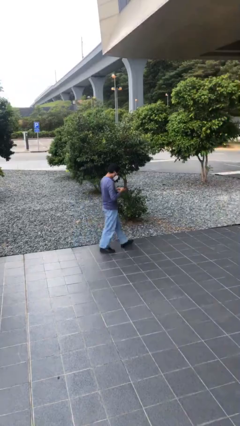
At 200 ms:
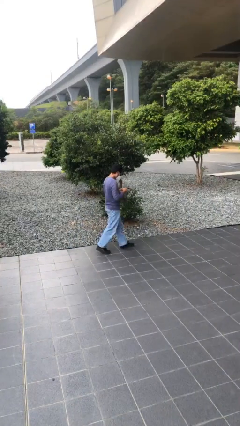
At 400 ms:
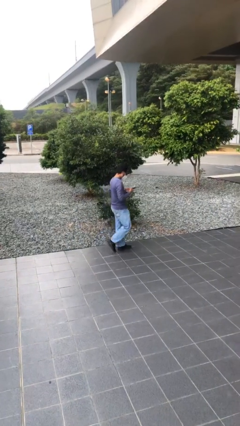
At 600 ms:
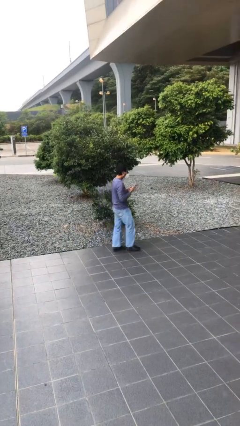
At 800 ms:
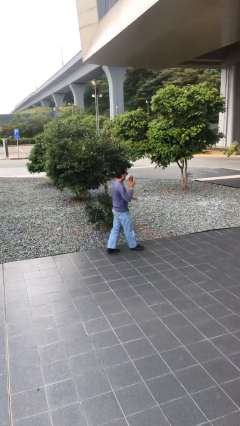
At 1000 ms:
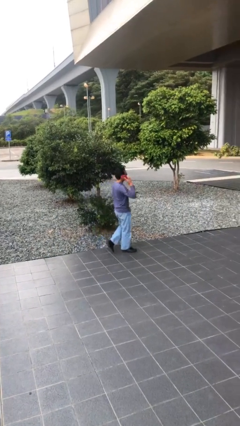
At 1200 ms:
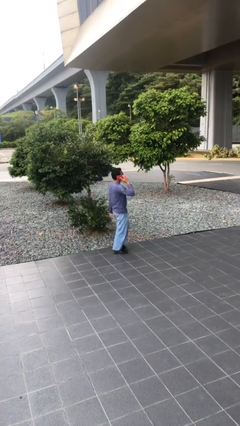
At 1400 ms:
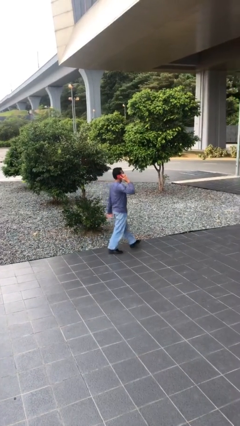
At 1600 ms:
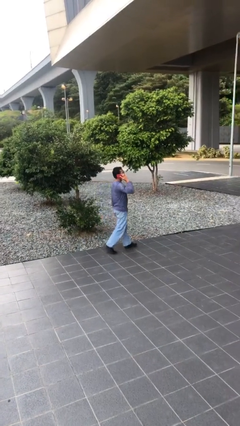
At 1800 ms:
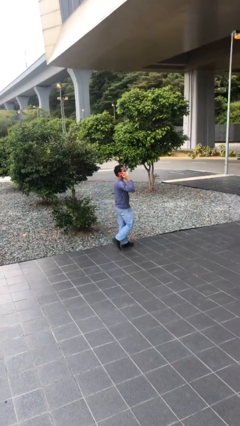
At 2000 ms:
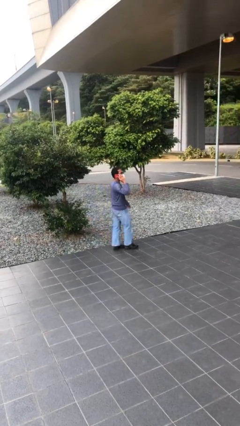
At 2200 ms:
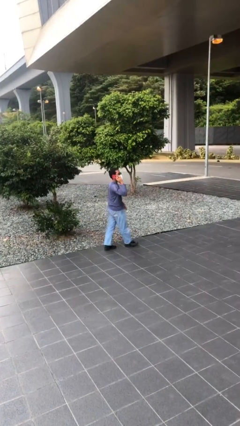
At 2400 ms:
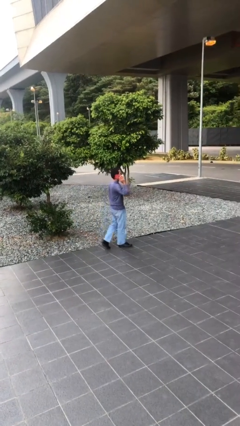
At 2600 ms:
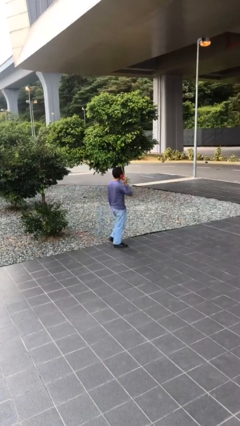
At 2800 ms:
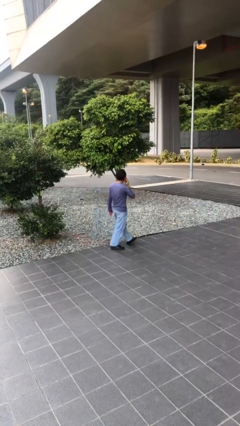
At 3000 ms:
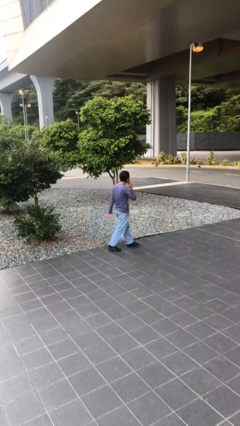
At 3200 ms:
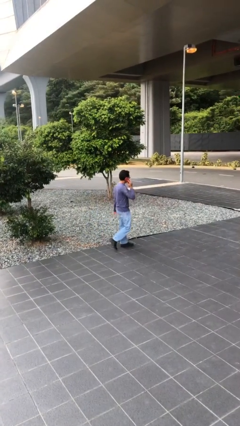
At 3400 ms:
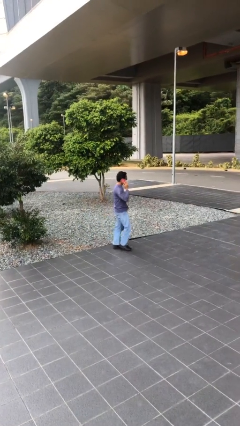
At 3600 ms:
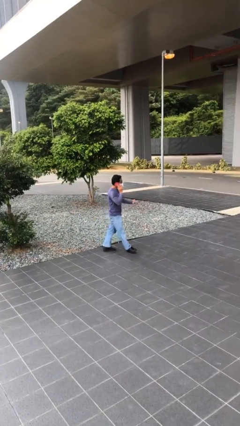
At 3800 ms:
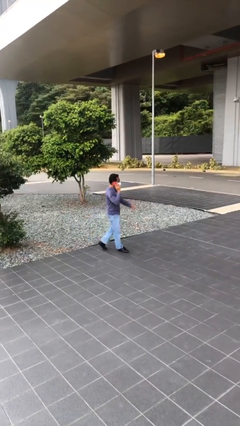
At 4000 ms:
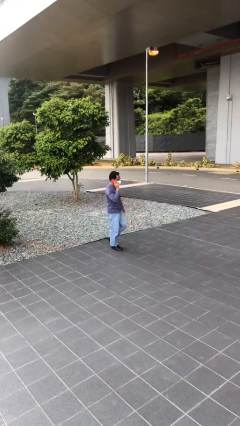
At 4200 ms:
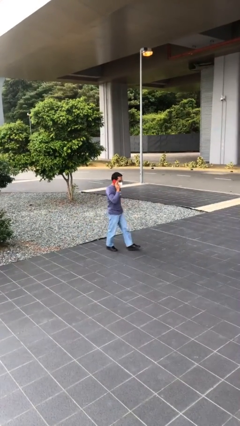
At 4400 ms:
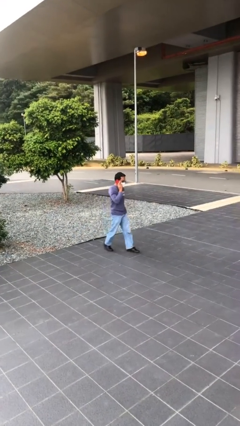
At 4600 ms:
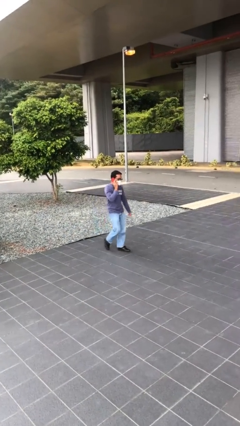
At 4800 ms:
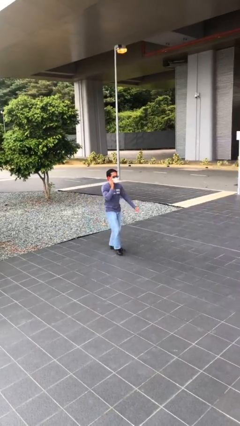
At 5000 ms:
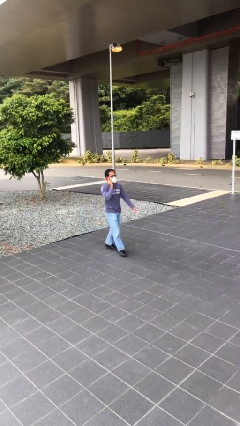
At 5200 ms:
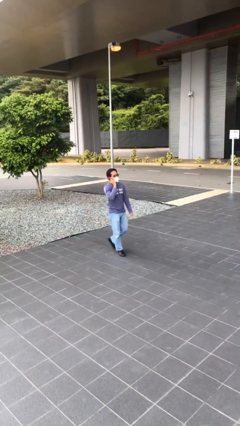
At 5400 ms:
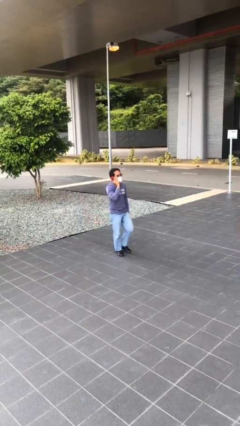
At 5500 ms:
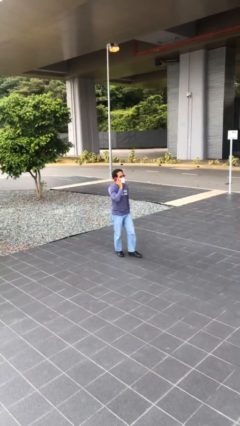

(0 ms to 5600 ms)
person talks on phone

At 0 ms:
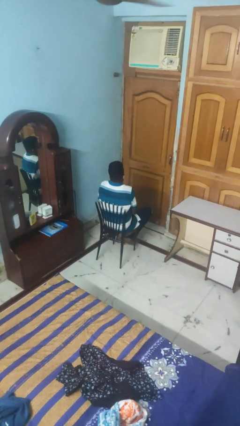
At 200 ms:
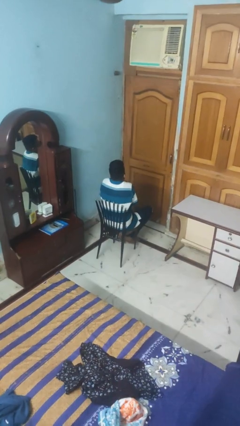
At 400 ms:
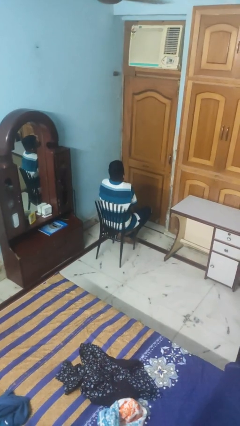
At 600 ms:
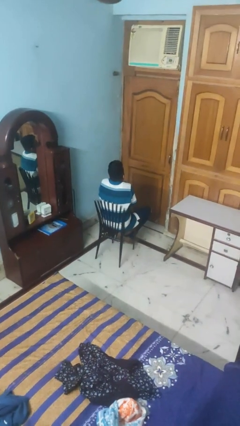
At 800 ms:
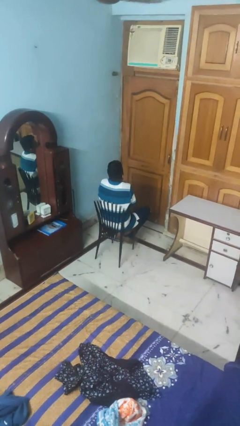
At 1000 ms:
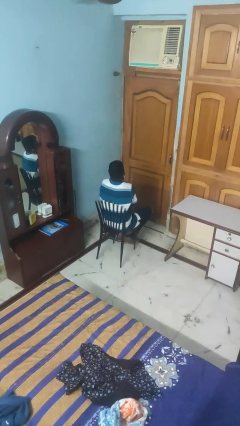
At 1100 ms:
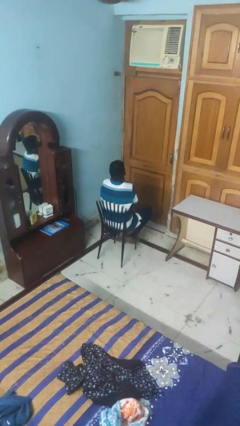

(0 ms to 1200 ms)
person shrugs

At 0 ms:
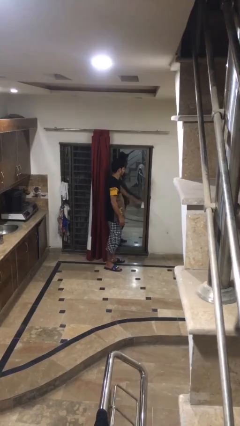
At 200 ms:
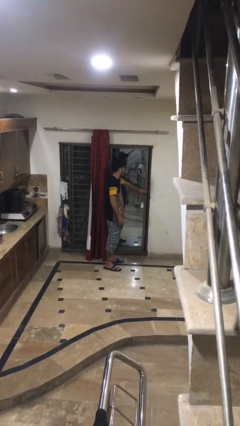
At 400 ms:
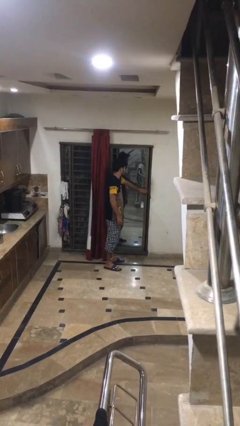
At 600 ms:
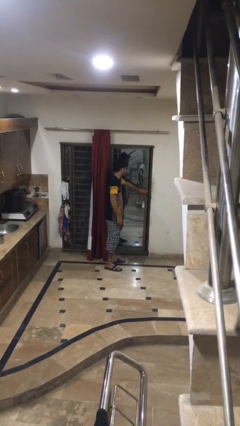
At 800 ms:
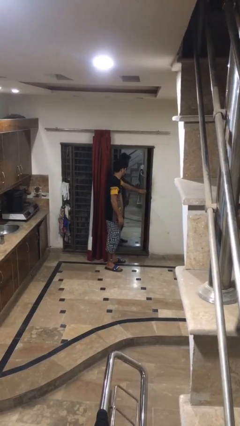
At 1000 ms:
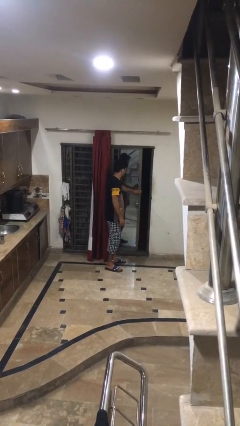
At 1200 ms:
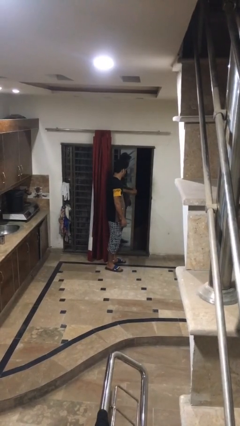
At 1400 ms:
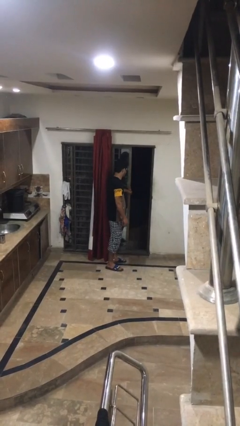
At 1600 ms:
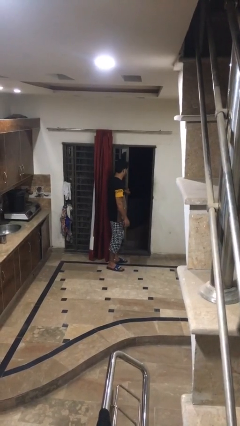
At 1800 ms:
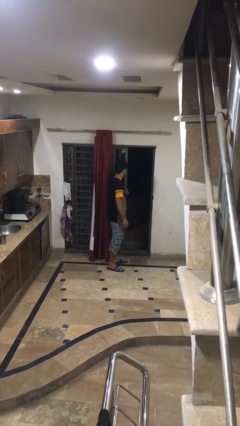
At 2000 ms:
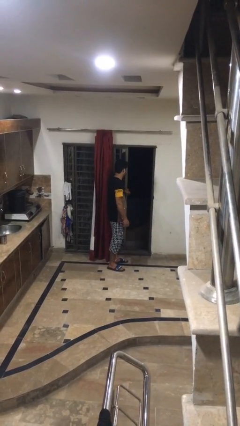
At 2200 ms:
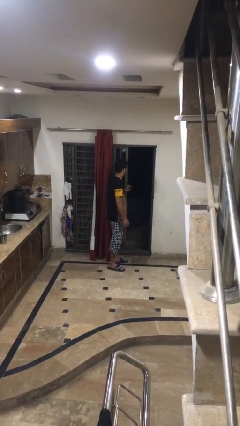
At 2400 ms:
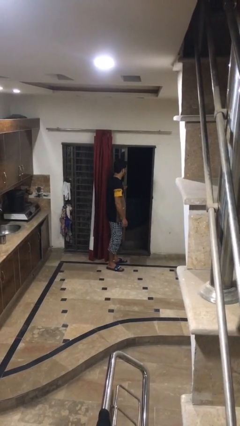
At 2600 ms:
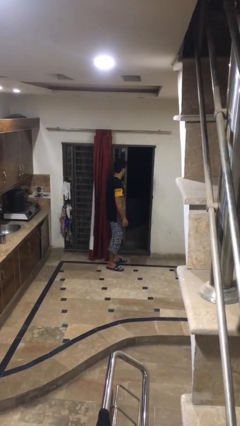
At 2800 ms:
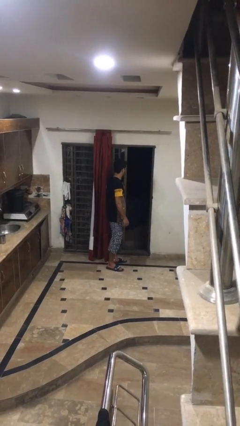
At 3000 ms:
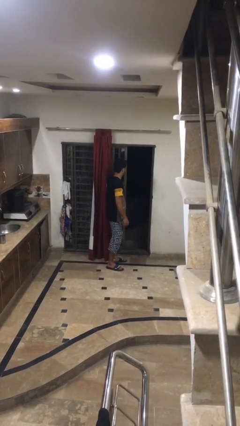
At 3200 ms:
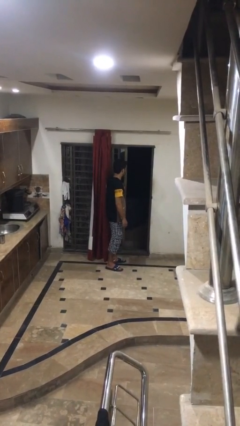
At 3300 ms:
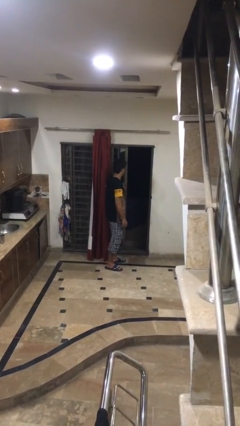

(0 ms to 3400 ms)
person opens home window

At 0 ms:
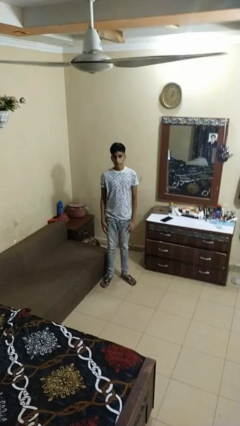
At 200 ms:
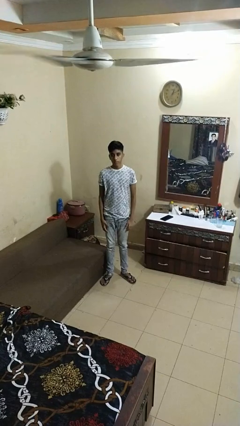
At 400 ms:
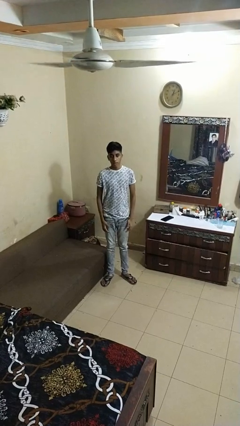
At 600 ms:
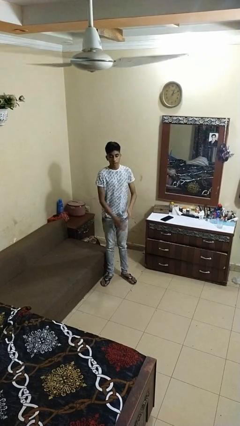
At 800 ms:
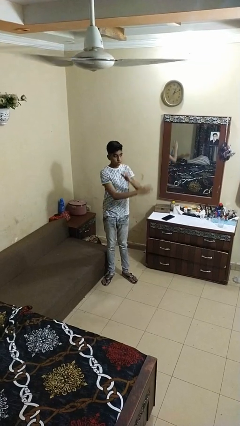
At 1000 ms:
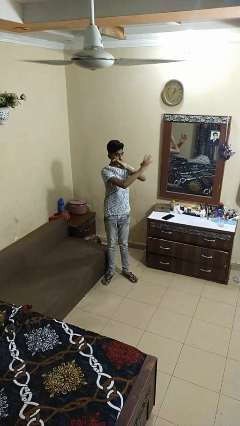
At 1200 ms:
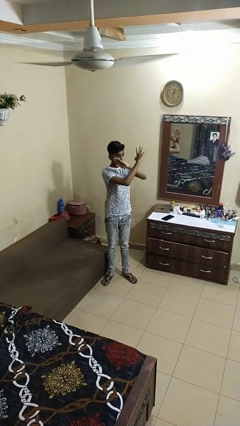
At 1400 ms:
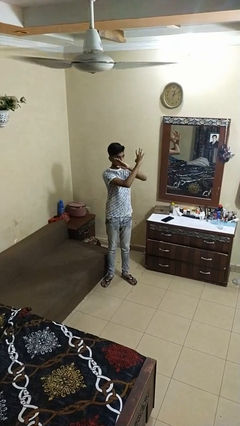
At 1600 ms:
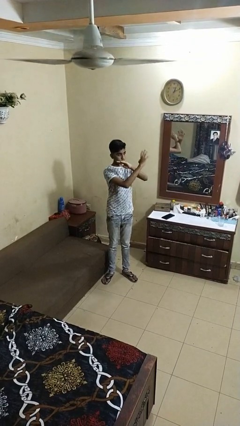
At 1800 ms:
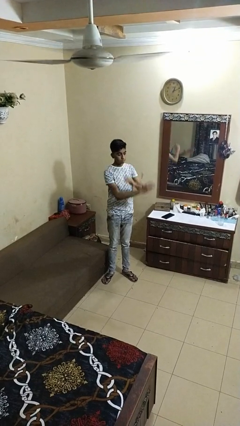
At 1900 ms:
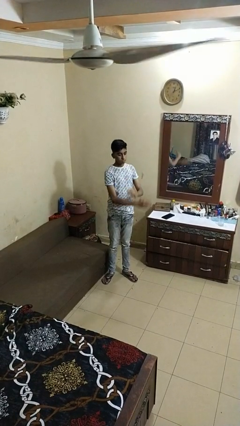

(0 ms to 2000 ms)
person gestures arms x

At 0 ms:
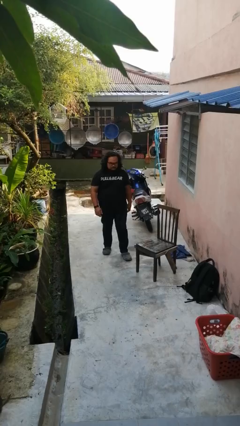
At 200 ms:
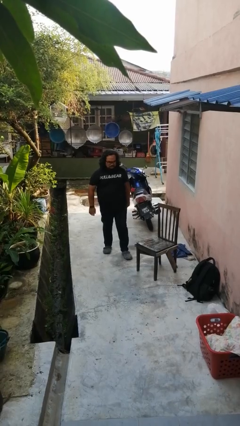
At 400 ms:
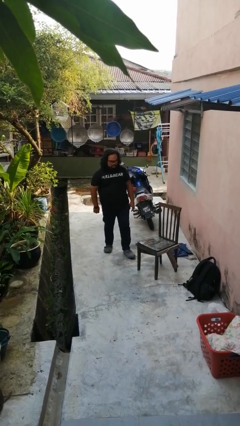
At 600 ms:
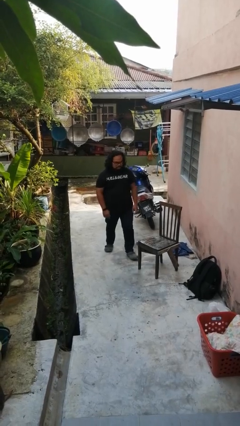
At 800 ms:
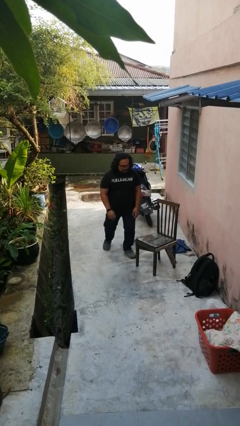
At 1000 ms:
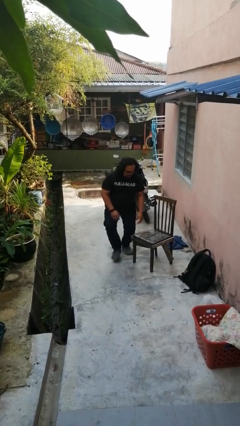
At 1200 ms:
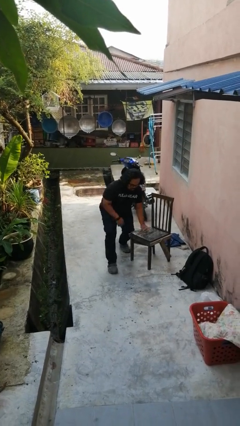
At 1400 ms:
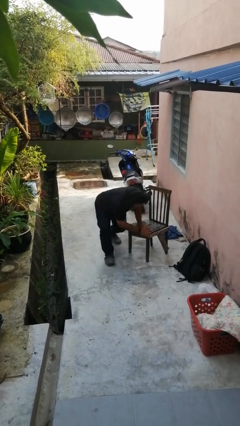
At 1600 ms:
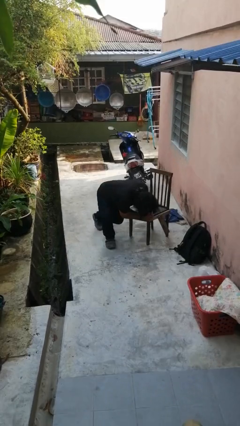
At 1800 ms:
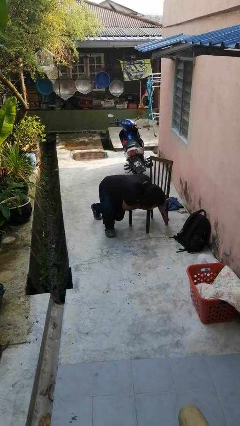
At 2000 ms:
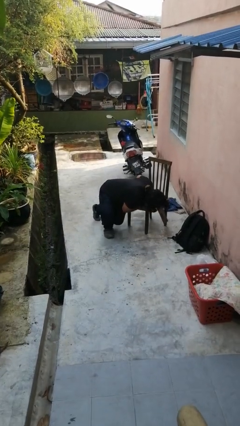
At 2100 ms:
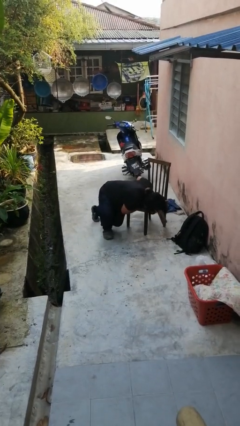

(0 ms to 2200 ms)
person trips on object on floor

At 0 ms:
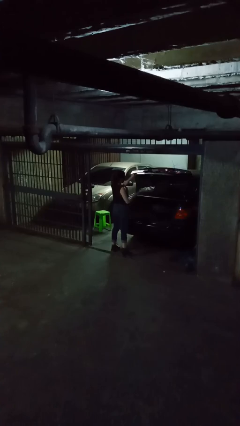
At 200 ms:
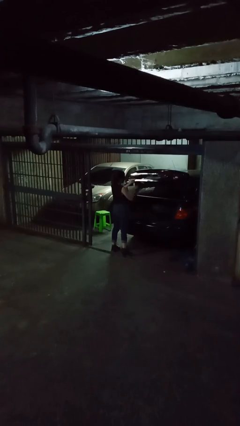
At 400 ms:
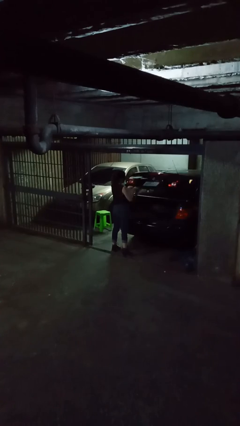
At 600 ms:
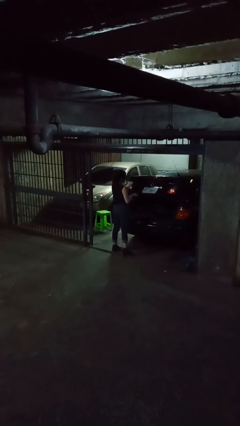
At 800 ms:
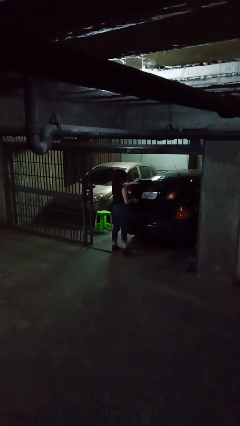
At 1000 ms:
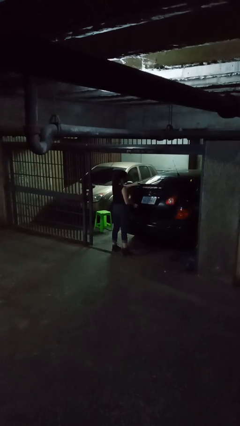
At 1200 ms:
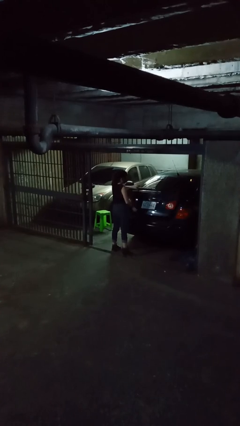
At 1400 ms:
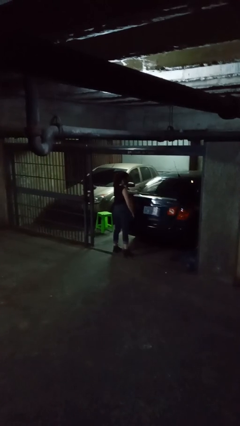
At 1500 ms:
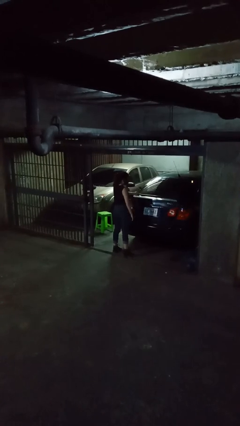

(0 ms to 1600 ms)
person closes car trunk
